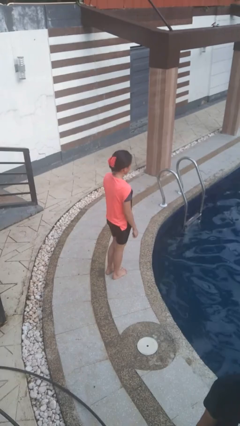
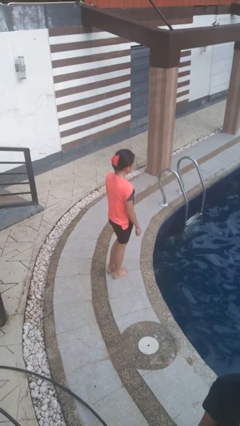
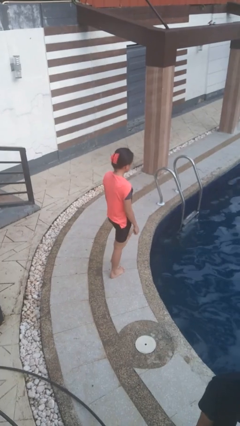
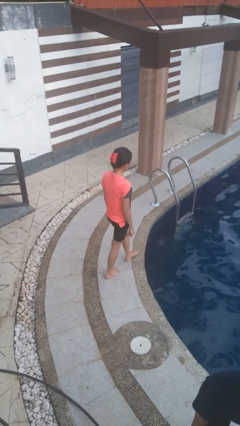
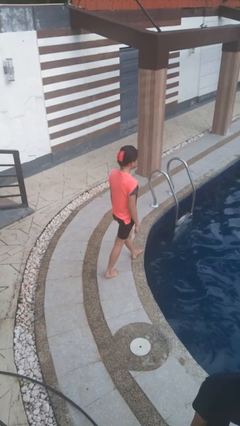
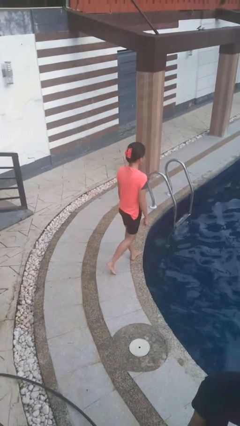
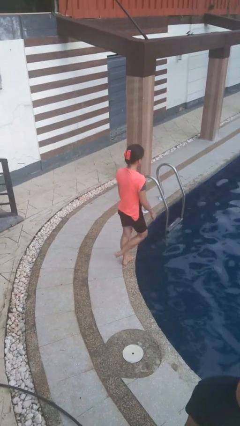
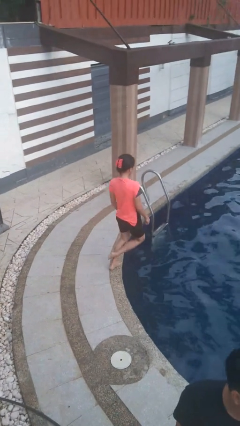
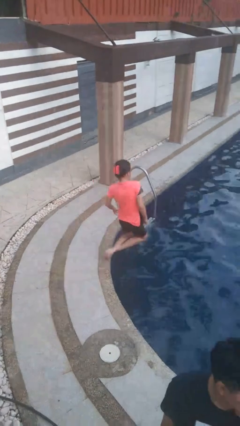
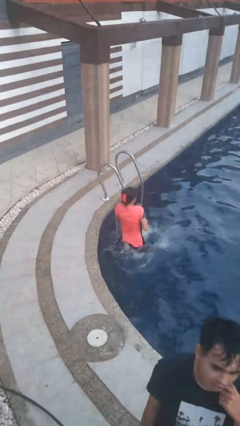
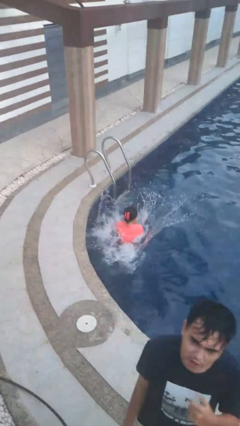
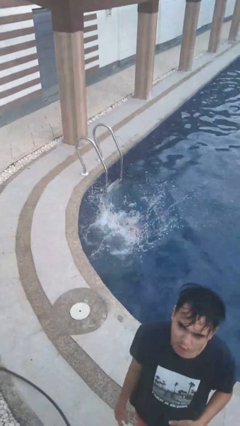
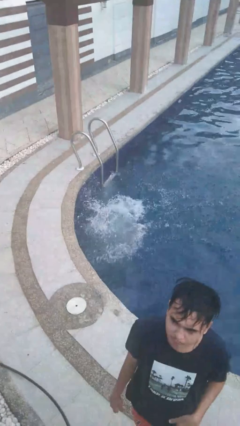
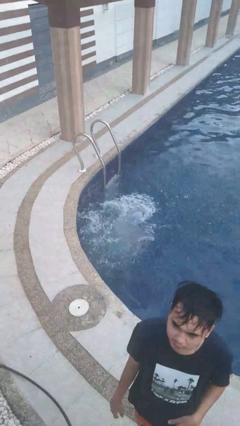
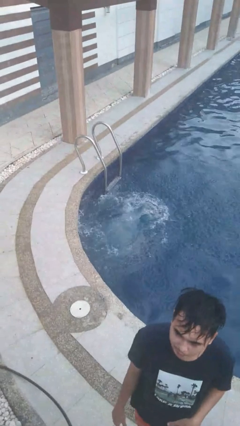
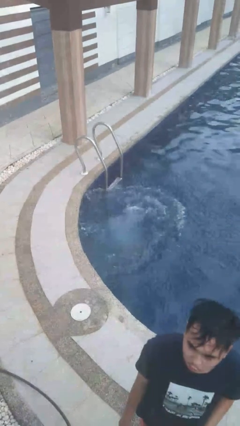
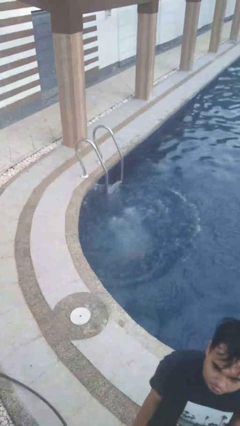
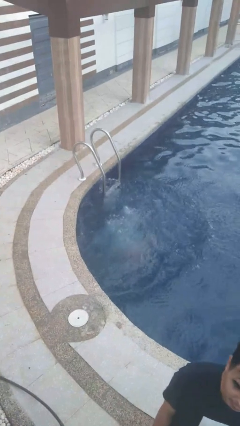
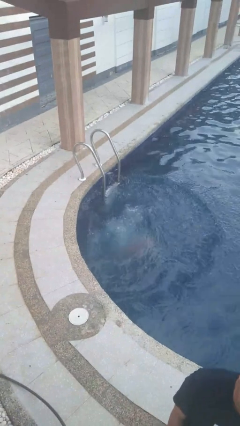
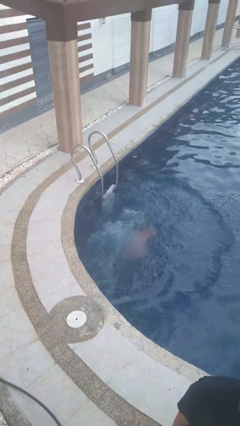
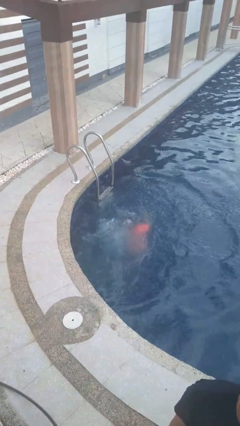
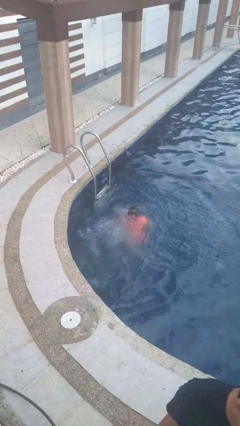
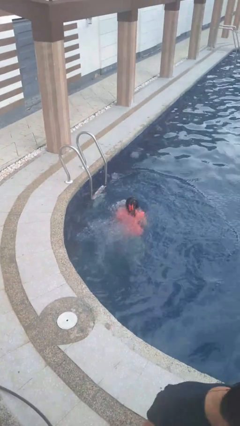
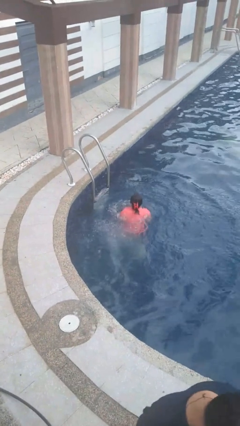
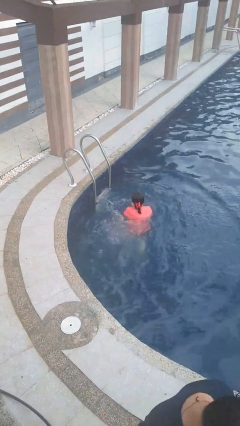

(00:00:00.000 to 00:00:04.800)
person falls into pool

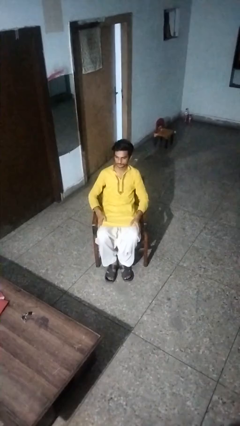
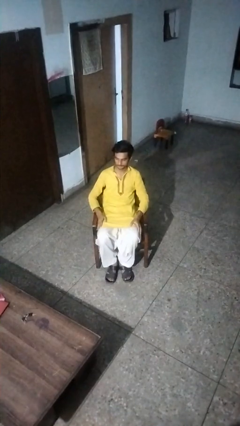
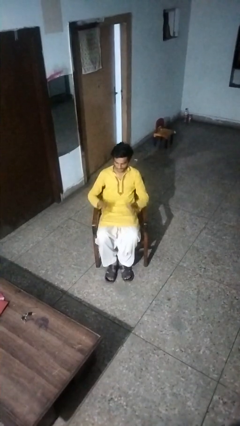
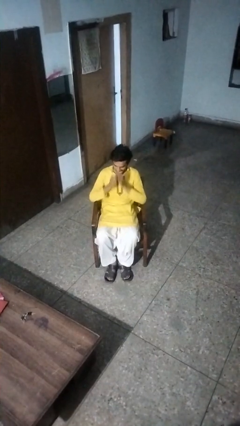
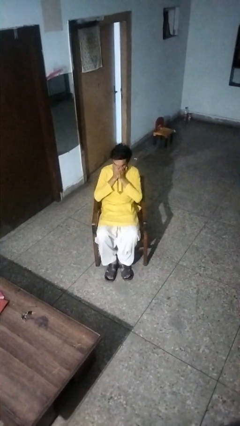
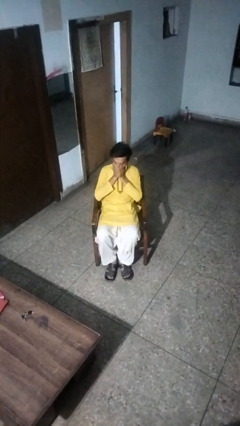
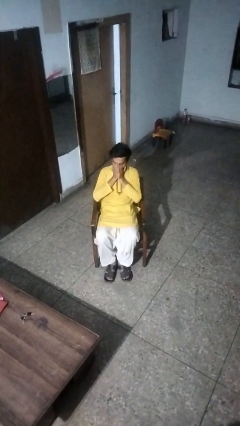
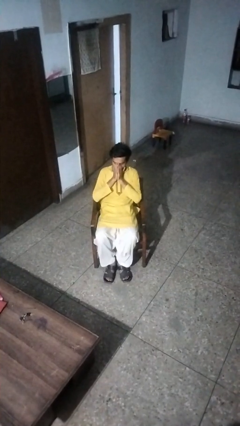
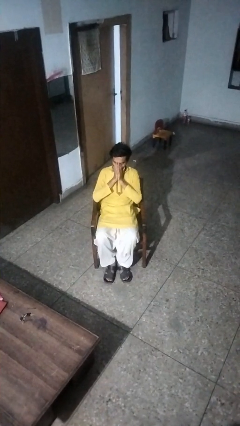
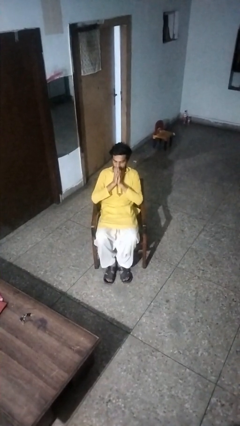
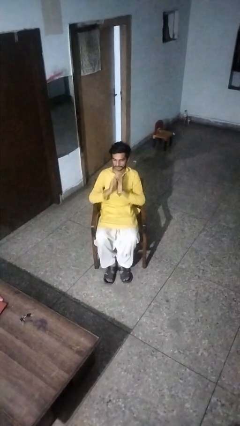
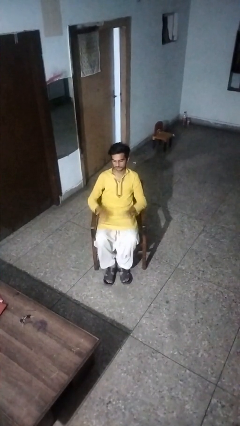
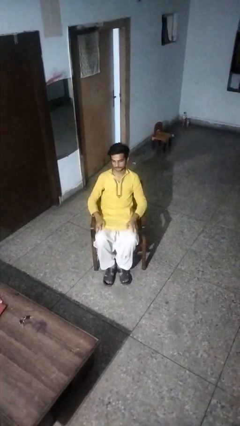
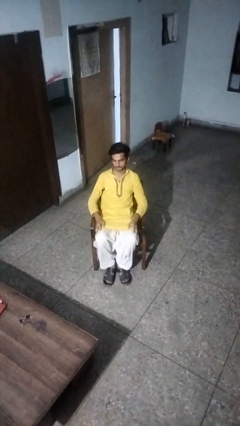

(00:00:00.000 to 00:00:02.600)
person yawns

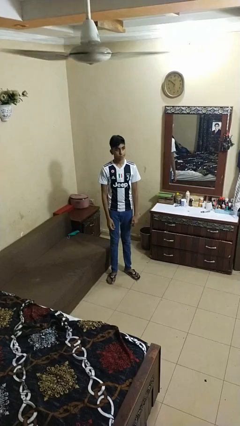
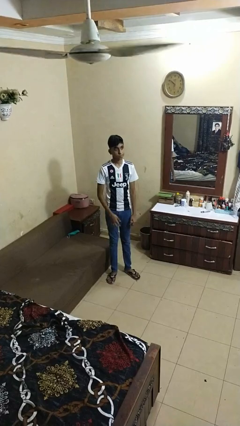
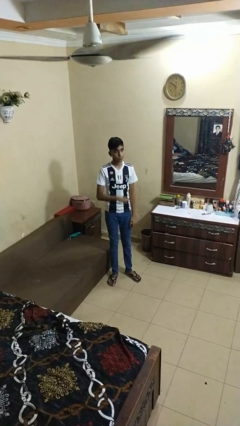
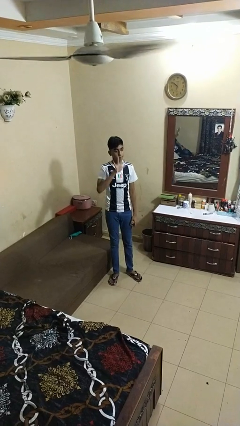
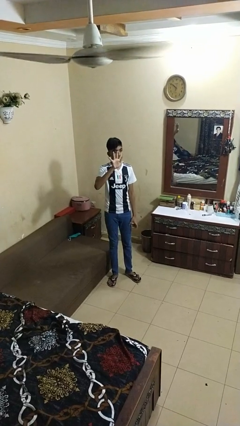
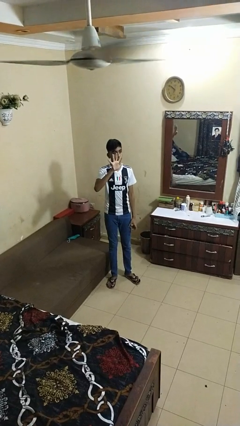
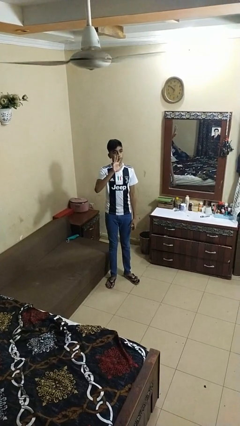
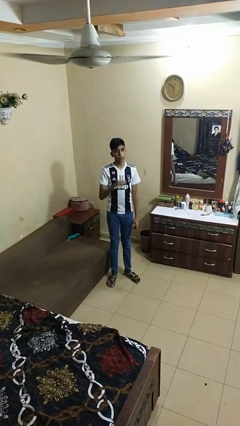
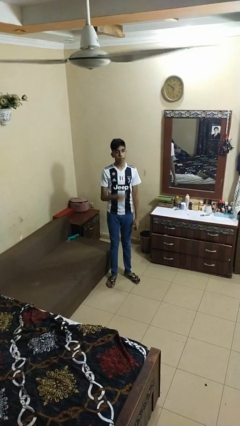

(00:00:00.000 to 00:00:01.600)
person gestures number five

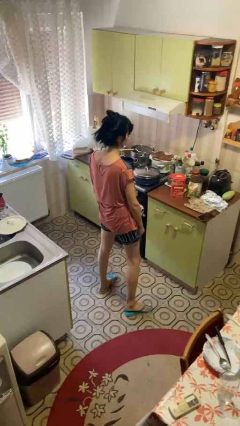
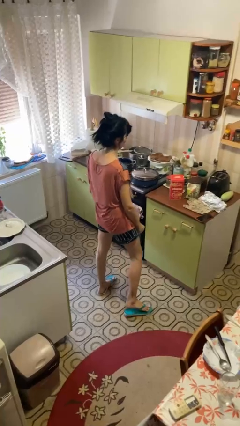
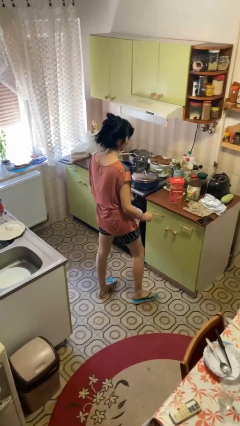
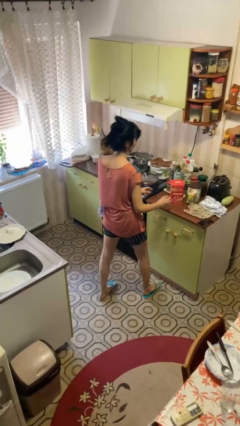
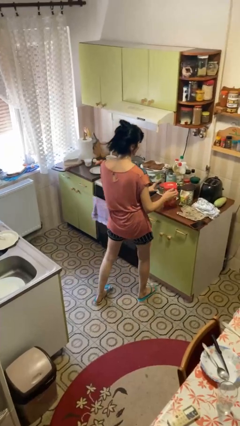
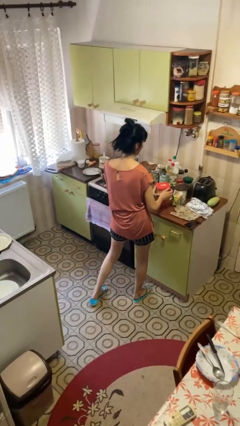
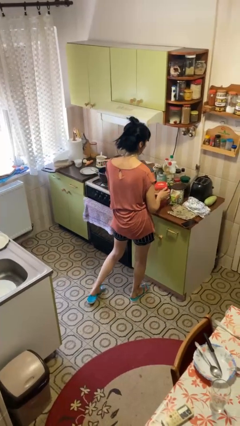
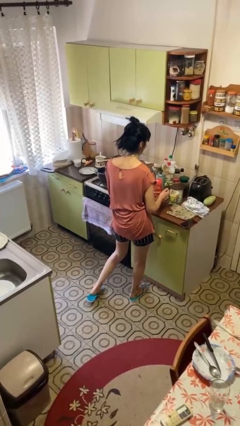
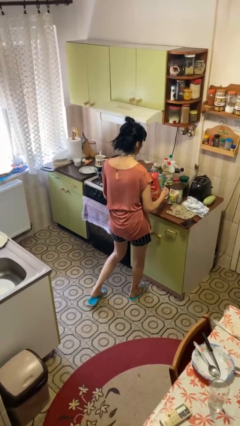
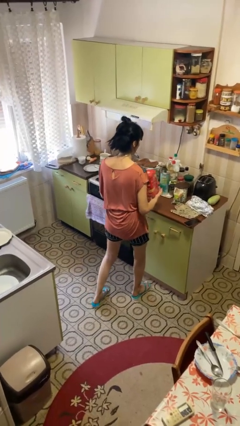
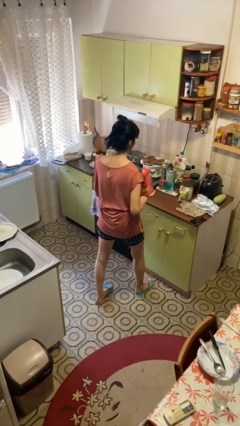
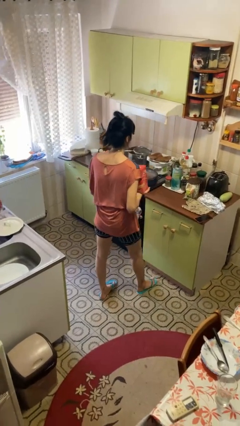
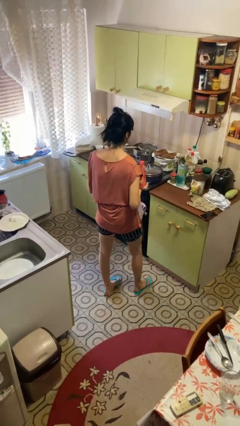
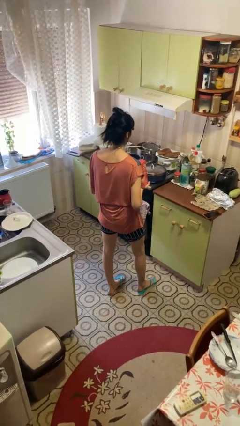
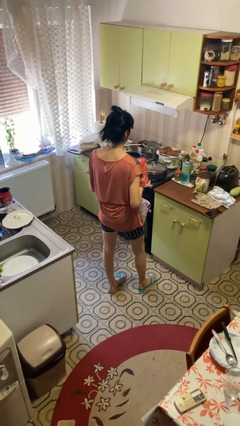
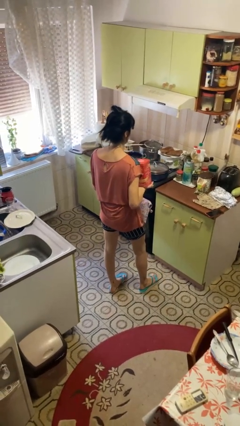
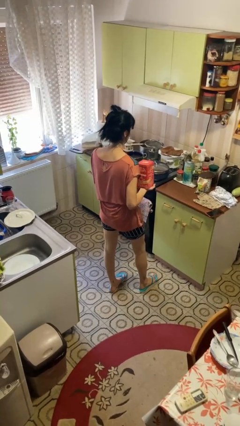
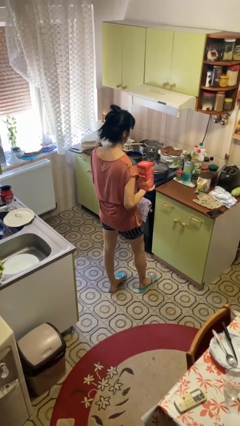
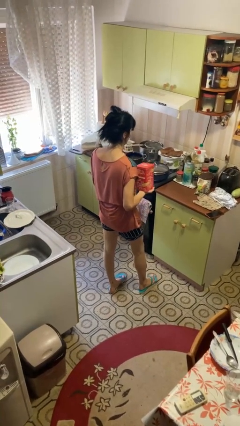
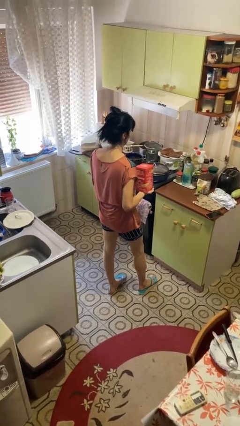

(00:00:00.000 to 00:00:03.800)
person picks up object from countertop

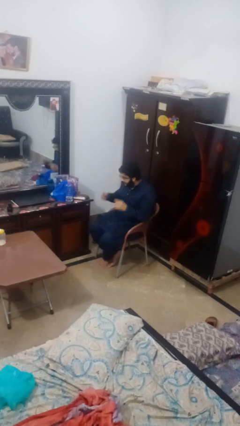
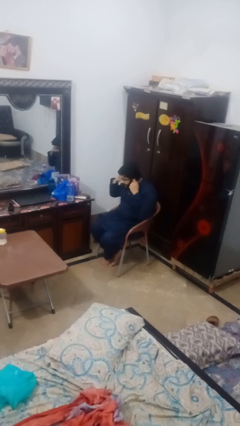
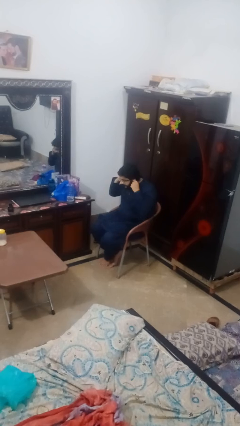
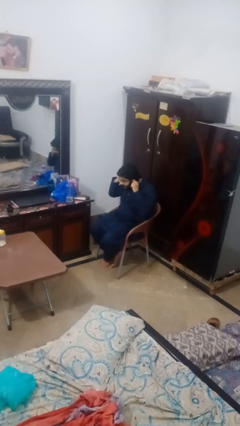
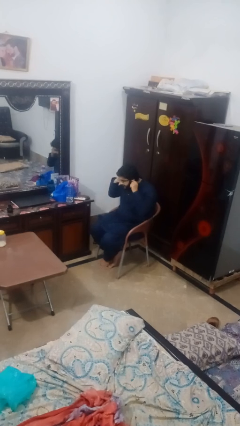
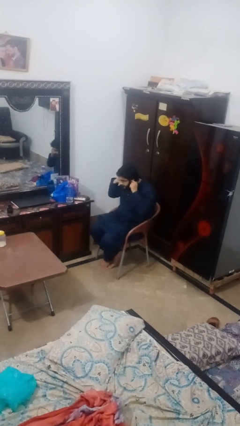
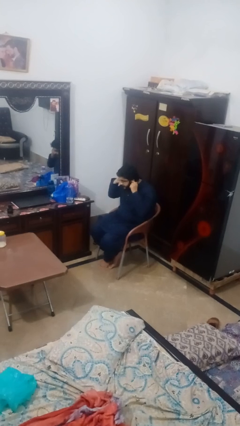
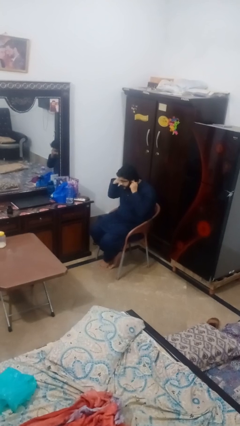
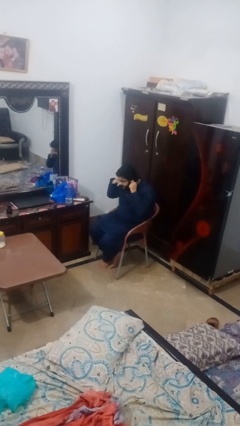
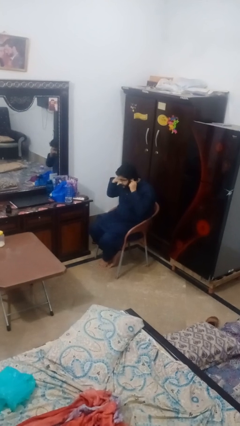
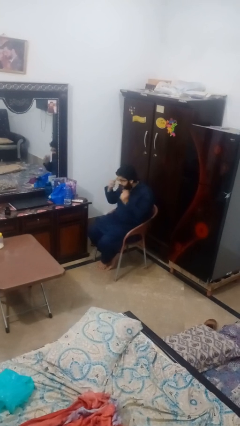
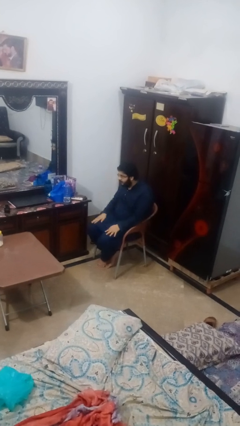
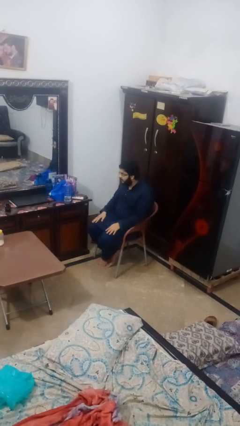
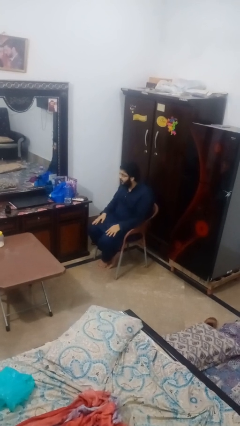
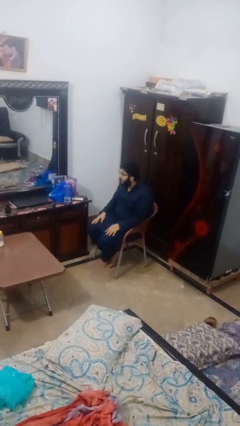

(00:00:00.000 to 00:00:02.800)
person puts fingers in ear

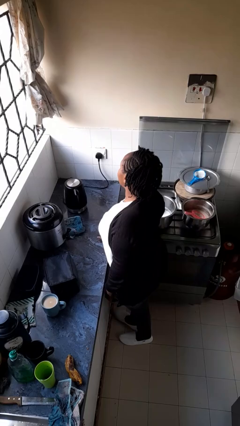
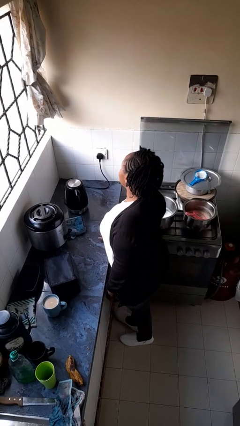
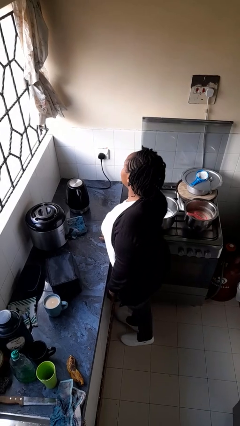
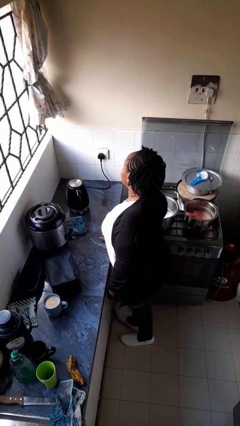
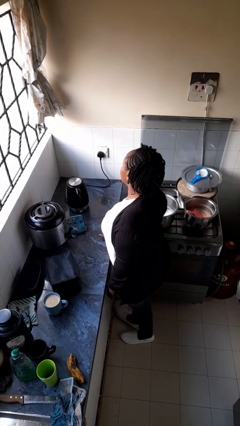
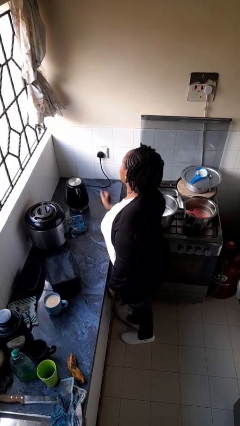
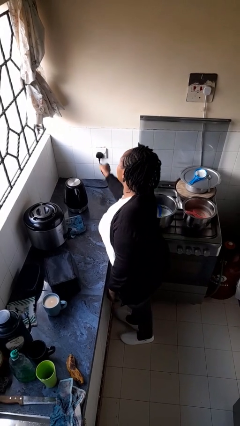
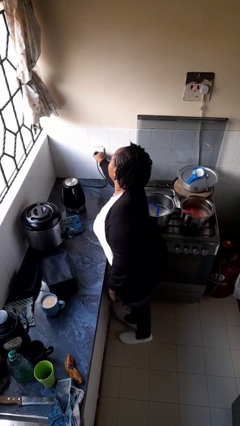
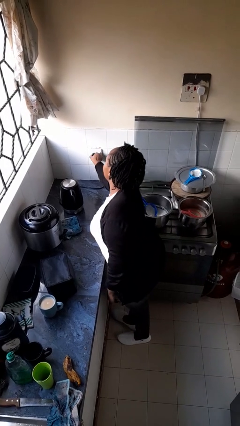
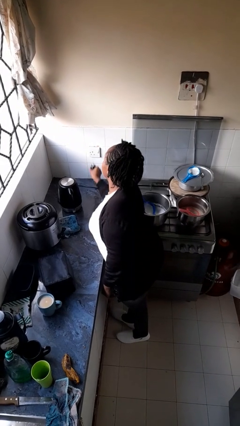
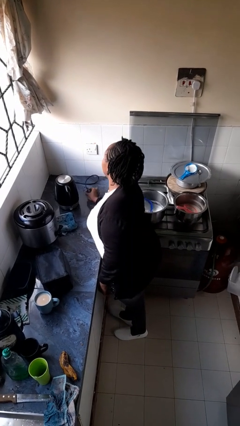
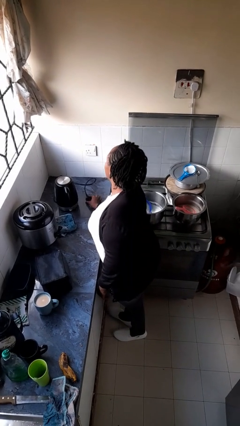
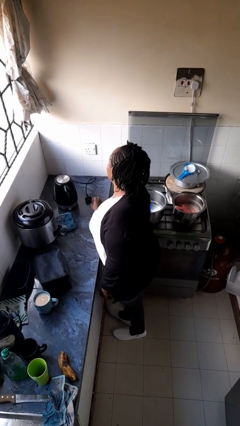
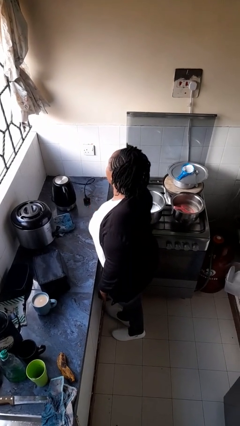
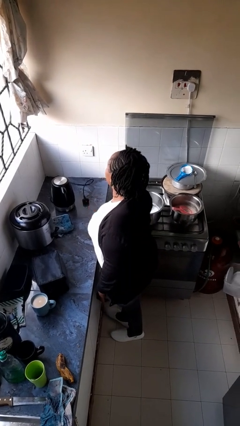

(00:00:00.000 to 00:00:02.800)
person unplugs from electrical socket
